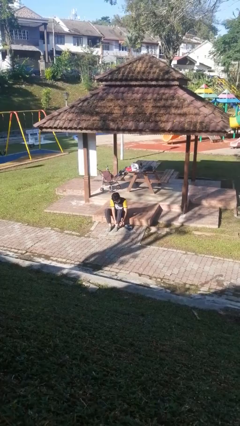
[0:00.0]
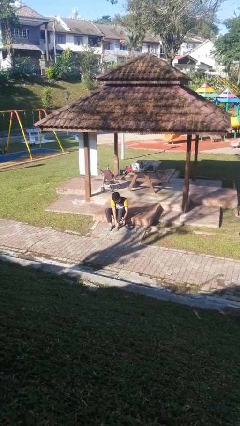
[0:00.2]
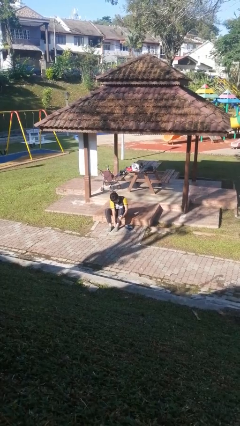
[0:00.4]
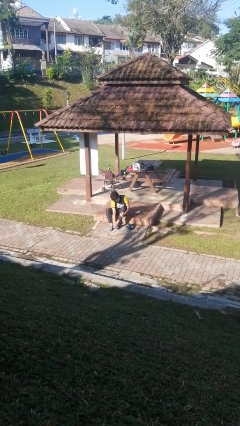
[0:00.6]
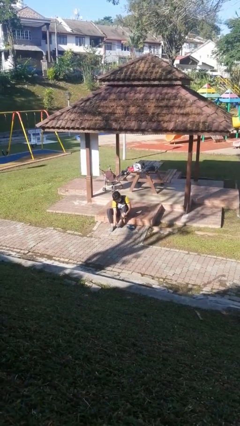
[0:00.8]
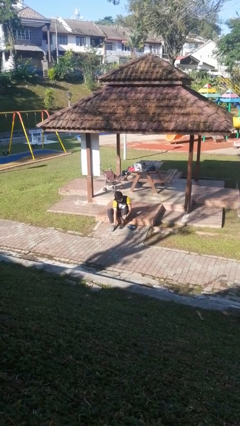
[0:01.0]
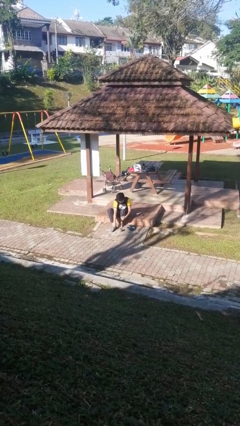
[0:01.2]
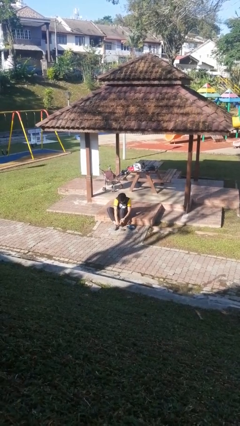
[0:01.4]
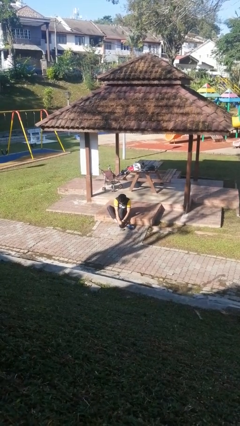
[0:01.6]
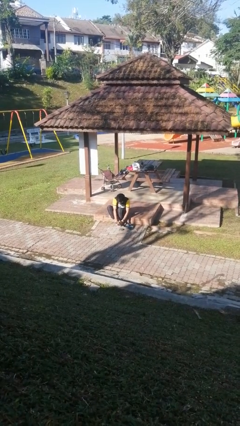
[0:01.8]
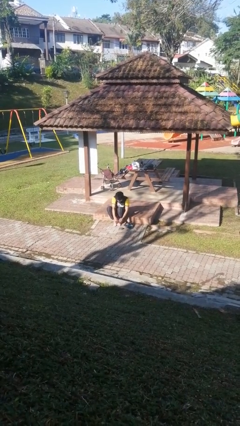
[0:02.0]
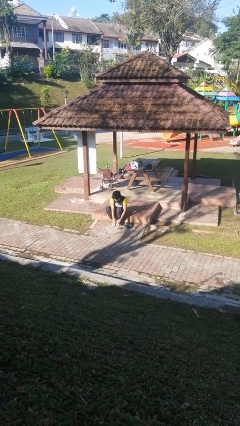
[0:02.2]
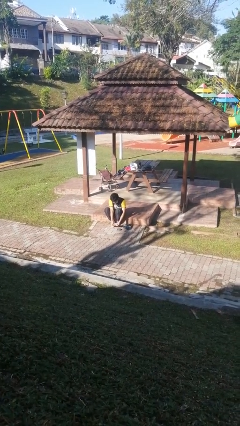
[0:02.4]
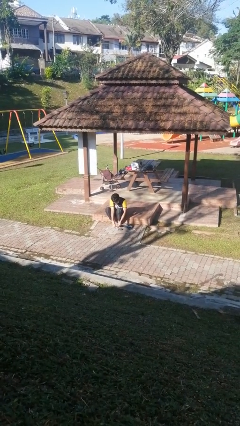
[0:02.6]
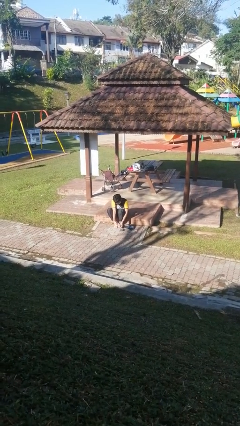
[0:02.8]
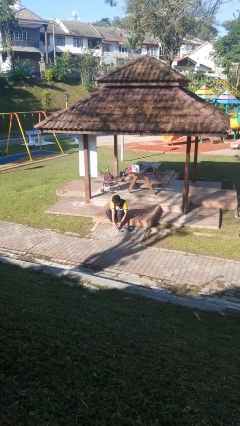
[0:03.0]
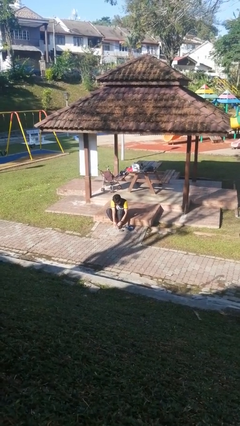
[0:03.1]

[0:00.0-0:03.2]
person takes off socks

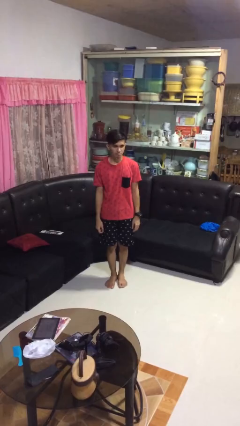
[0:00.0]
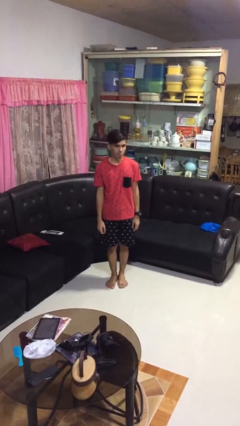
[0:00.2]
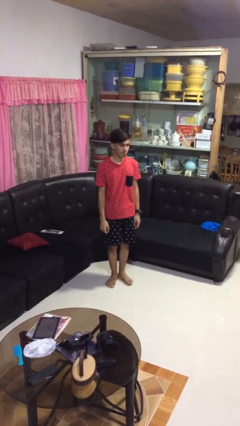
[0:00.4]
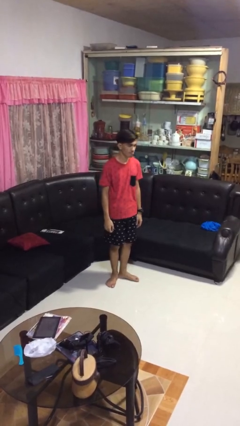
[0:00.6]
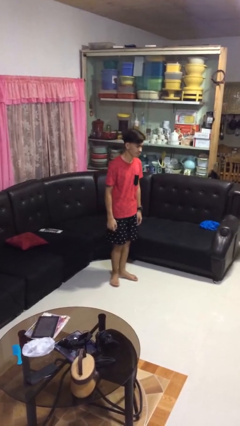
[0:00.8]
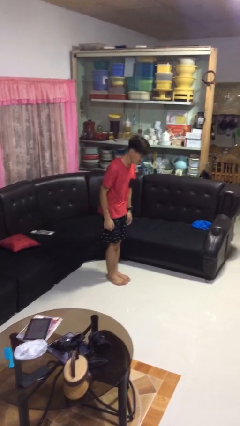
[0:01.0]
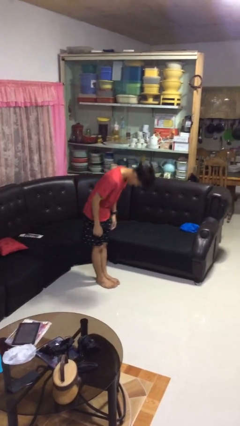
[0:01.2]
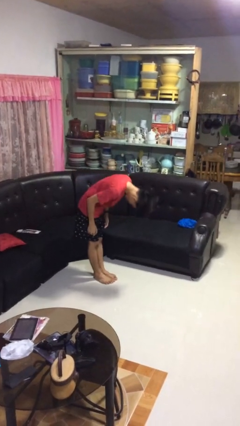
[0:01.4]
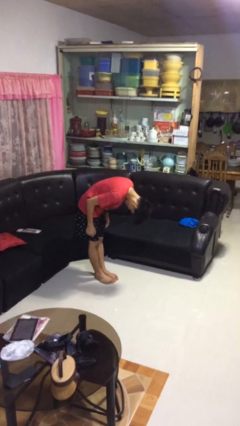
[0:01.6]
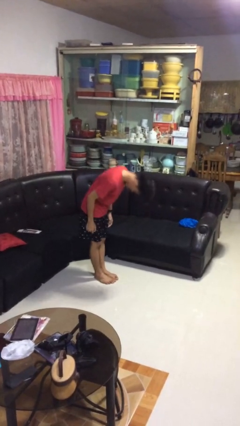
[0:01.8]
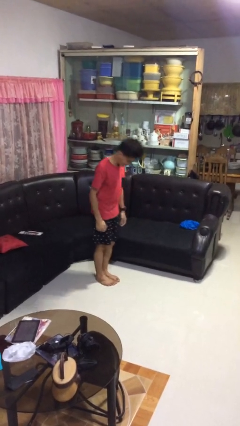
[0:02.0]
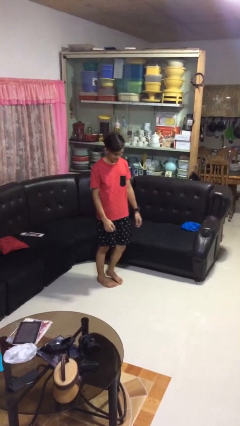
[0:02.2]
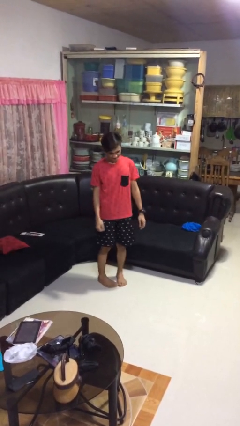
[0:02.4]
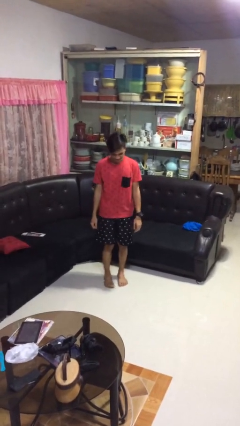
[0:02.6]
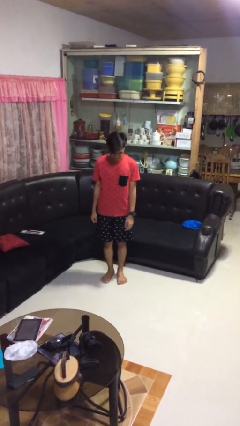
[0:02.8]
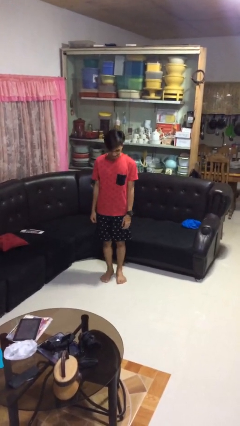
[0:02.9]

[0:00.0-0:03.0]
person bows

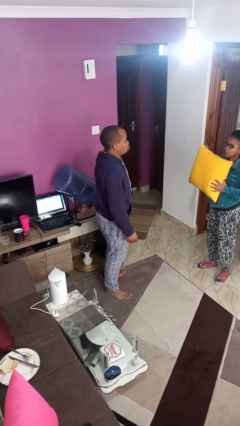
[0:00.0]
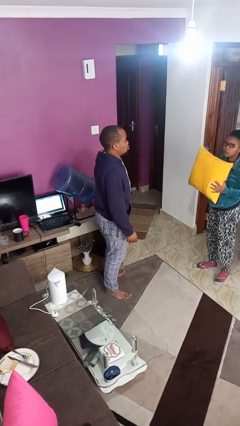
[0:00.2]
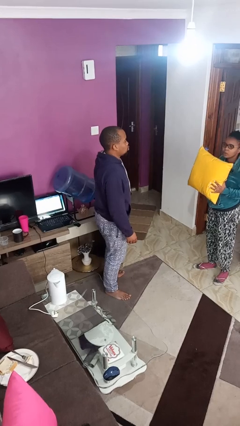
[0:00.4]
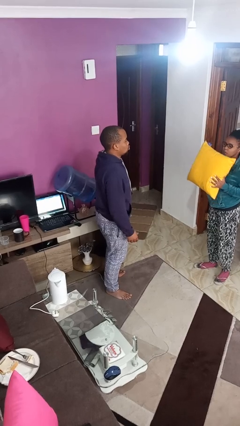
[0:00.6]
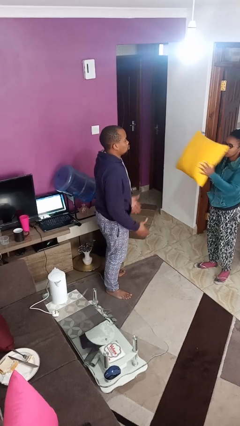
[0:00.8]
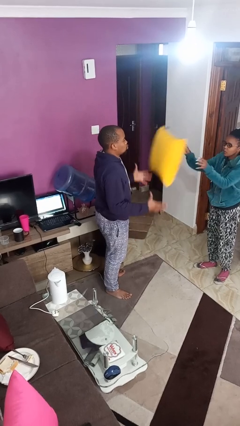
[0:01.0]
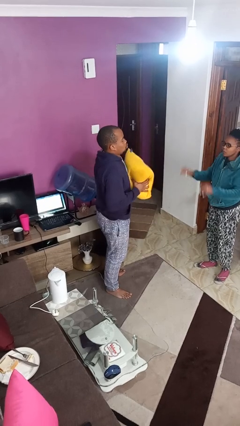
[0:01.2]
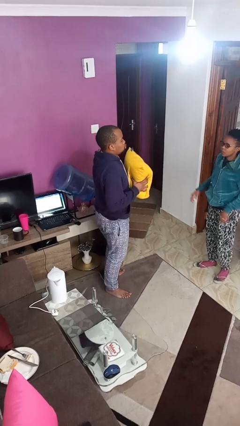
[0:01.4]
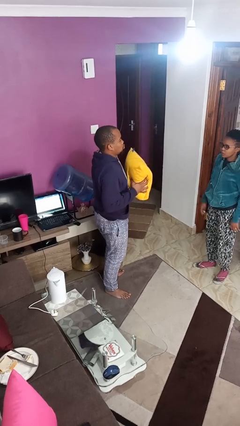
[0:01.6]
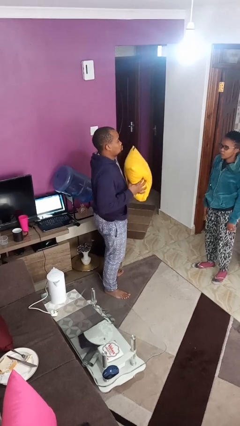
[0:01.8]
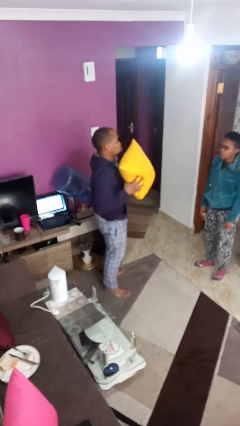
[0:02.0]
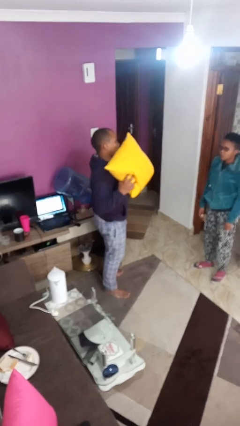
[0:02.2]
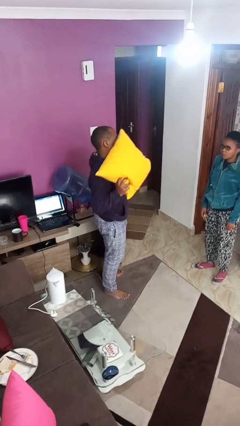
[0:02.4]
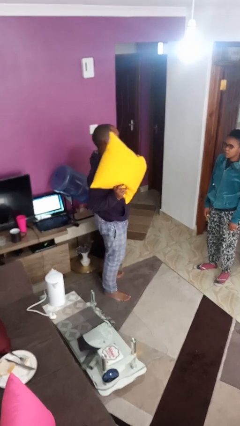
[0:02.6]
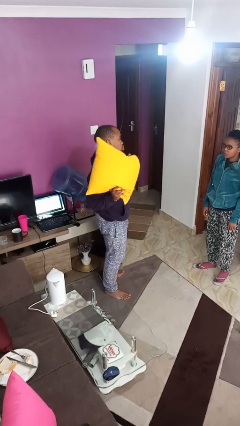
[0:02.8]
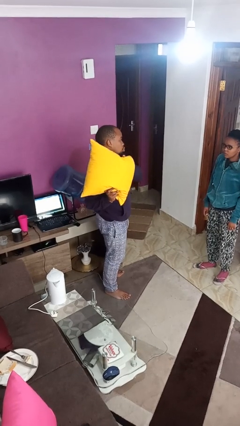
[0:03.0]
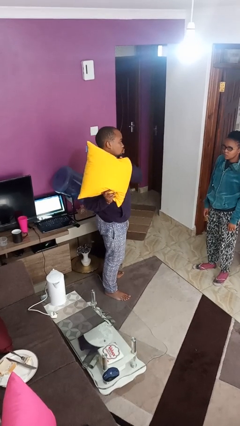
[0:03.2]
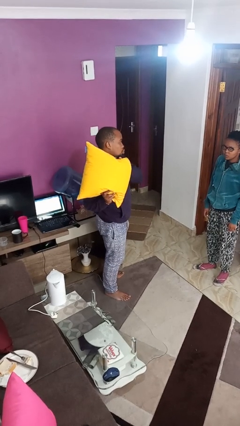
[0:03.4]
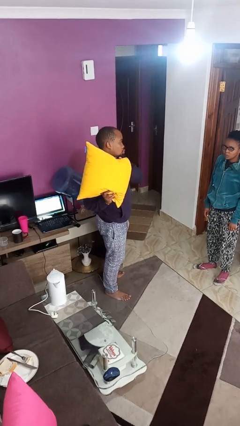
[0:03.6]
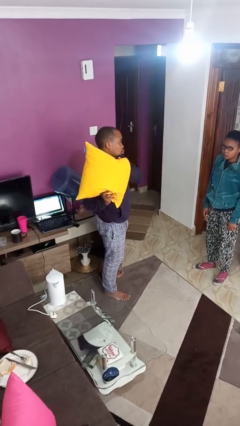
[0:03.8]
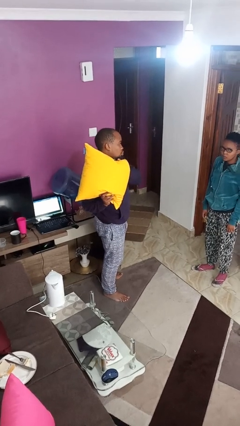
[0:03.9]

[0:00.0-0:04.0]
person catches object from person

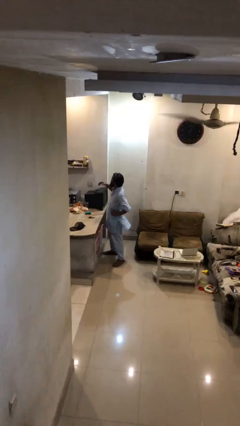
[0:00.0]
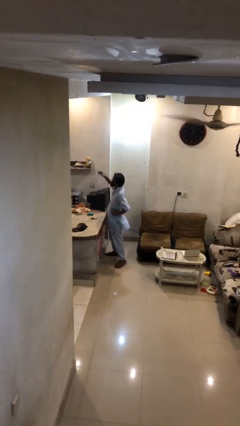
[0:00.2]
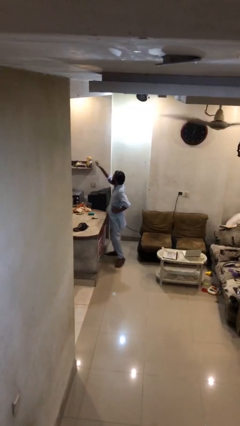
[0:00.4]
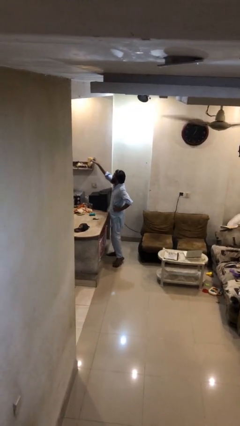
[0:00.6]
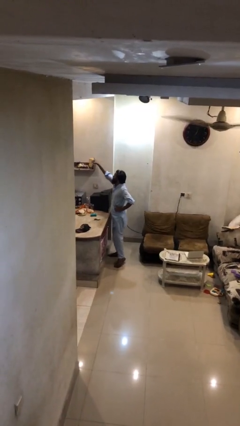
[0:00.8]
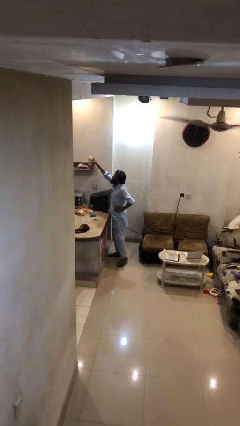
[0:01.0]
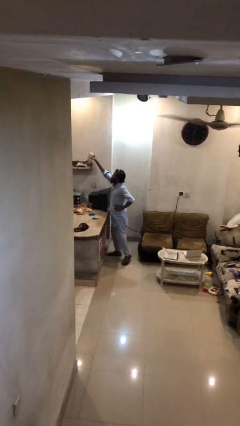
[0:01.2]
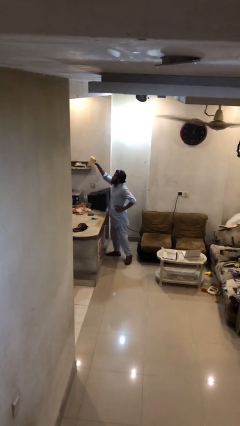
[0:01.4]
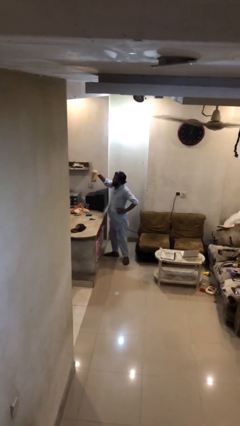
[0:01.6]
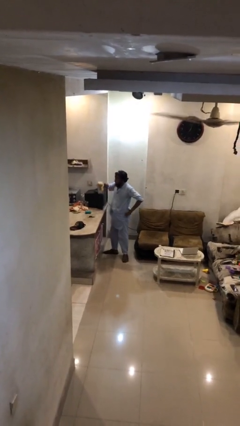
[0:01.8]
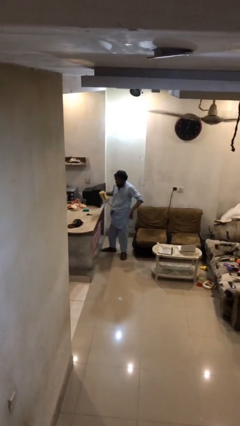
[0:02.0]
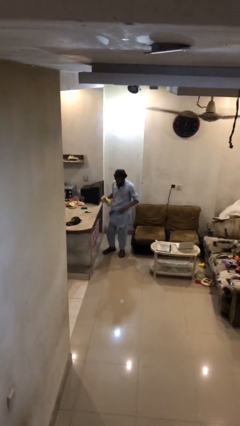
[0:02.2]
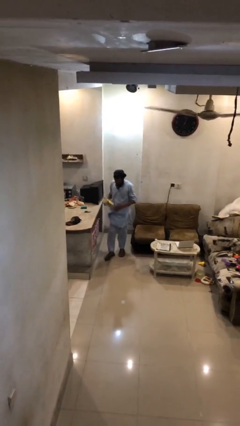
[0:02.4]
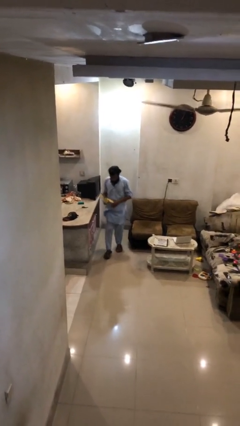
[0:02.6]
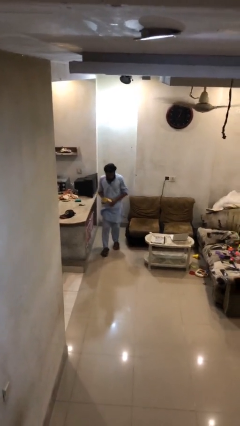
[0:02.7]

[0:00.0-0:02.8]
person picks up object from shelf

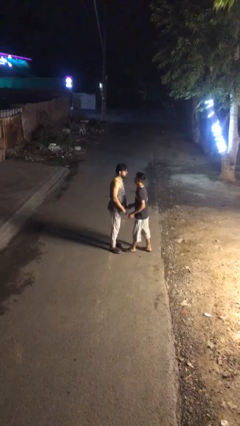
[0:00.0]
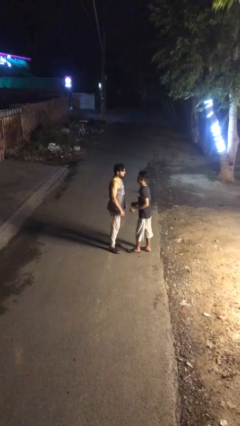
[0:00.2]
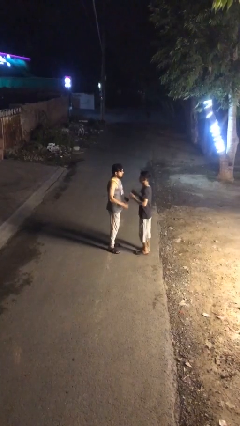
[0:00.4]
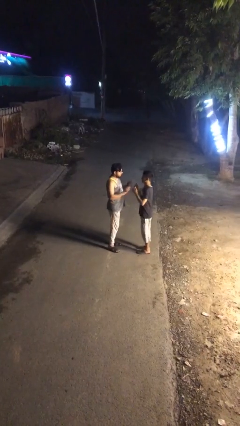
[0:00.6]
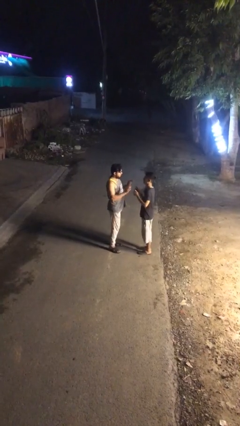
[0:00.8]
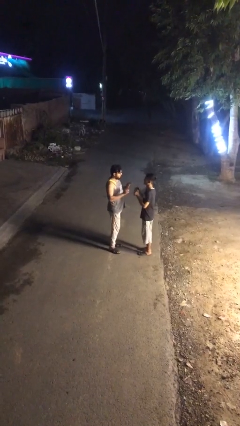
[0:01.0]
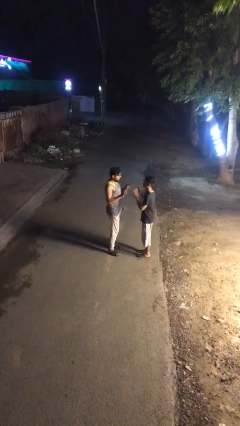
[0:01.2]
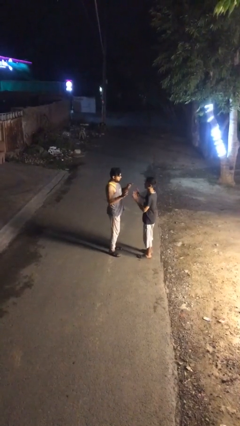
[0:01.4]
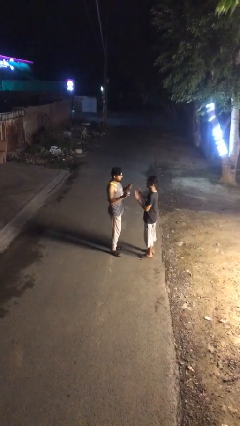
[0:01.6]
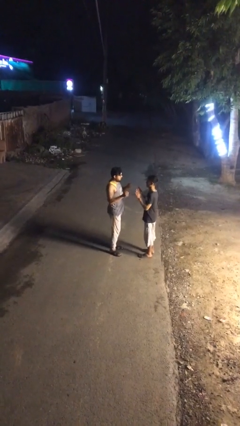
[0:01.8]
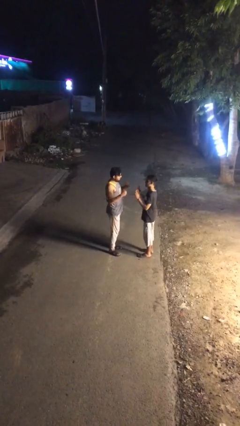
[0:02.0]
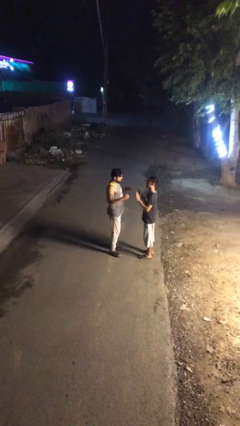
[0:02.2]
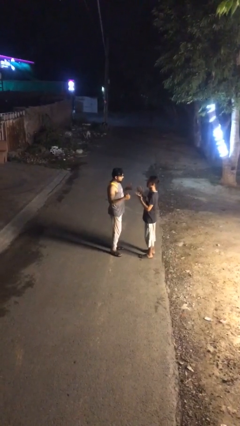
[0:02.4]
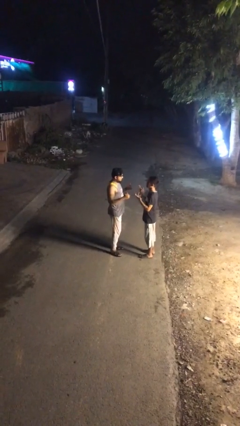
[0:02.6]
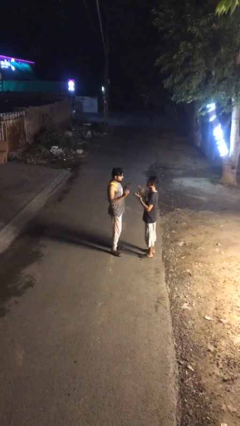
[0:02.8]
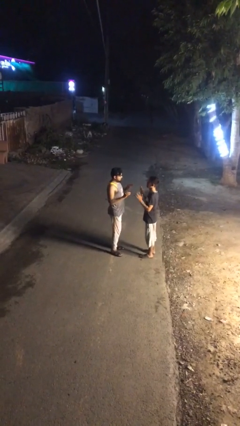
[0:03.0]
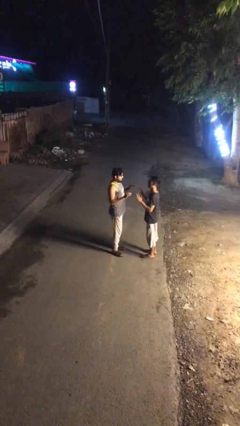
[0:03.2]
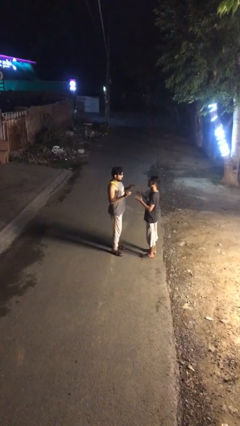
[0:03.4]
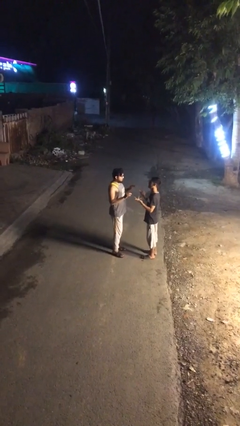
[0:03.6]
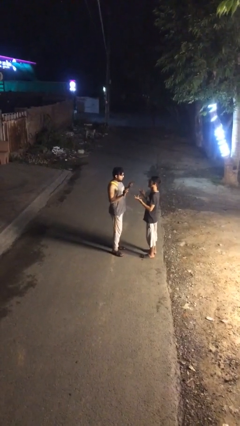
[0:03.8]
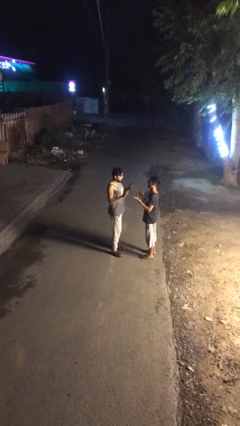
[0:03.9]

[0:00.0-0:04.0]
person talks to person

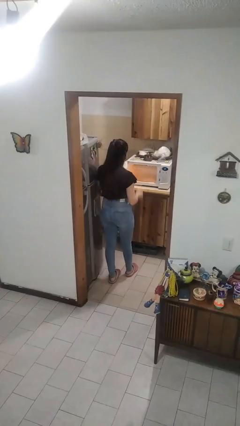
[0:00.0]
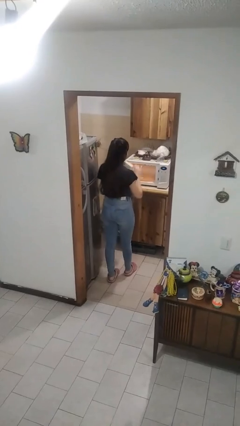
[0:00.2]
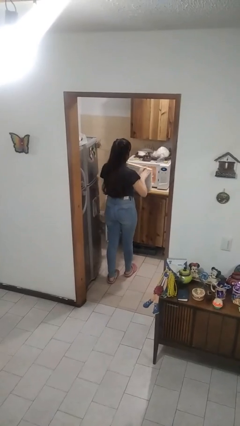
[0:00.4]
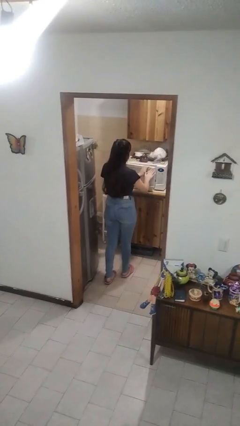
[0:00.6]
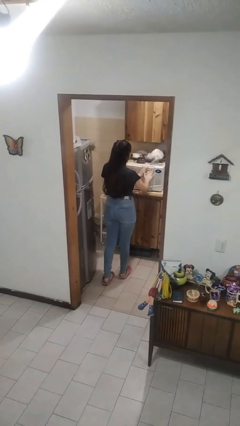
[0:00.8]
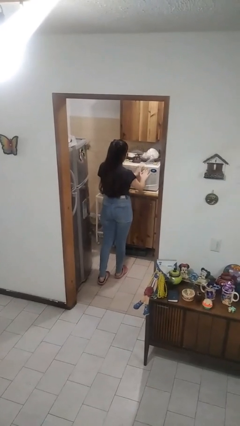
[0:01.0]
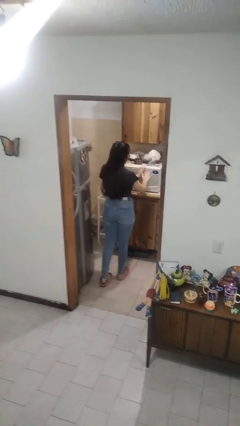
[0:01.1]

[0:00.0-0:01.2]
person closes microwave
